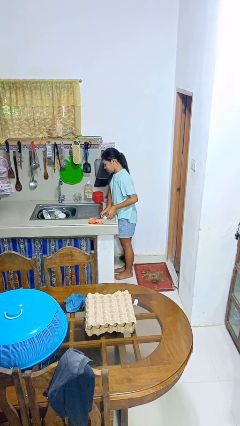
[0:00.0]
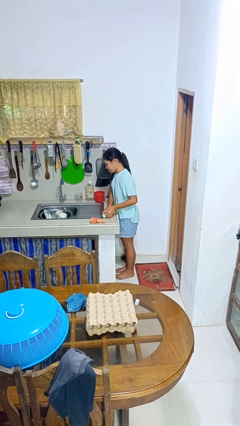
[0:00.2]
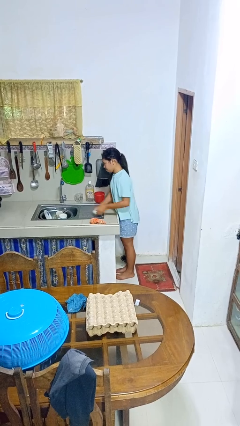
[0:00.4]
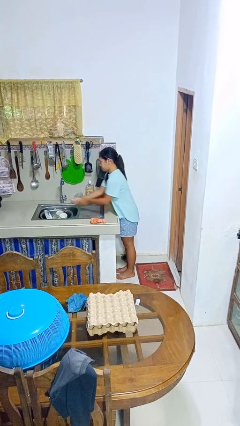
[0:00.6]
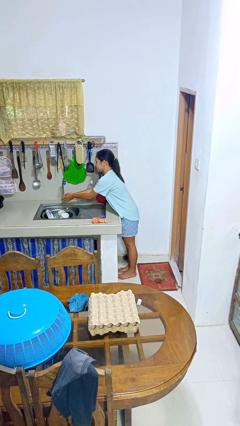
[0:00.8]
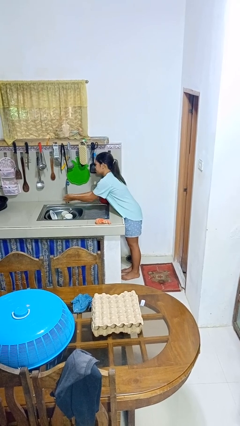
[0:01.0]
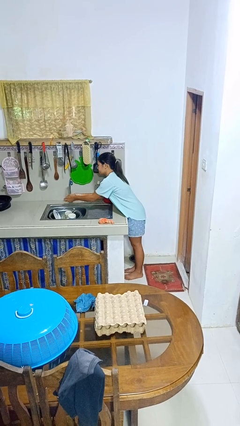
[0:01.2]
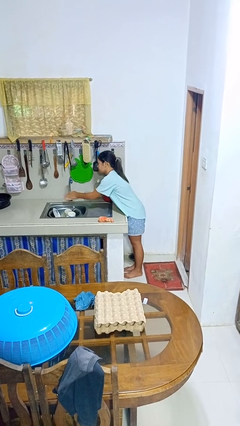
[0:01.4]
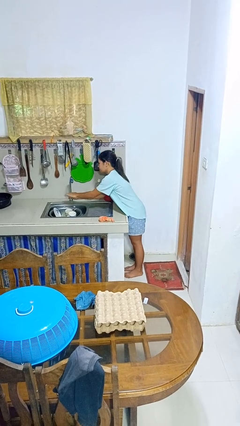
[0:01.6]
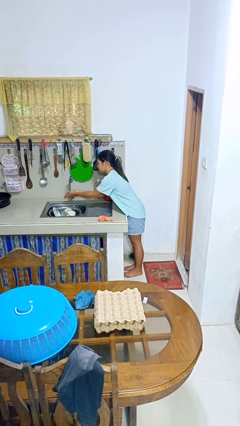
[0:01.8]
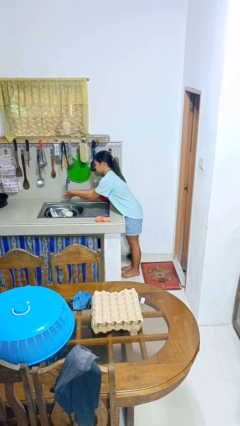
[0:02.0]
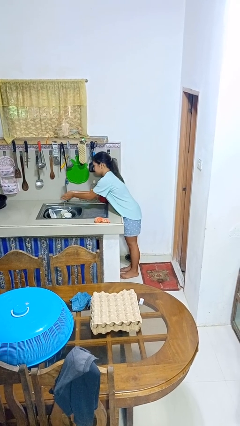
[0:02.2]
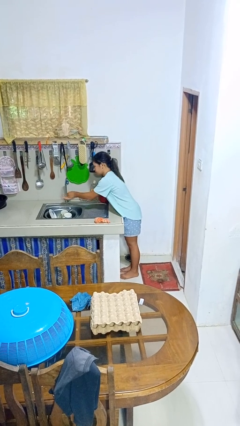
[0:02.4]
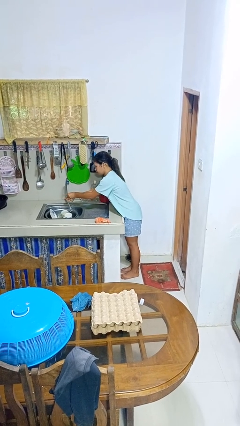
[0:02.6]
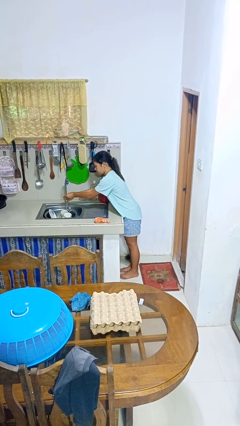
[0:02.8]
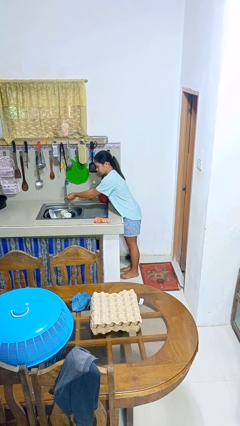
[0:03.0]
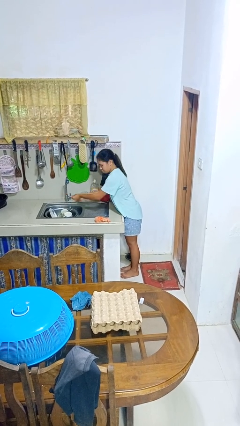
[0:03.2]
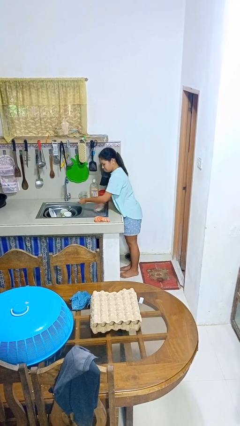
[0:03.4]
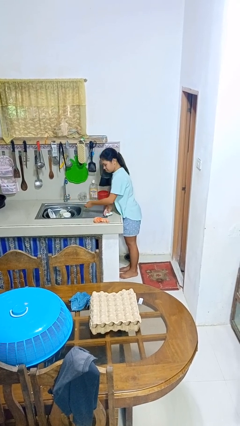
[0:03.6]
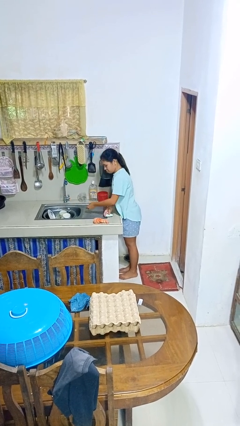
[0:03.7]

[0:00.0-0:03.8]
person washes hands

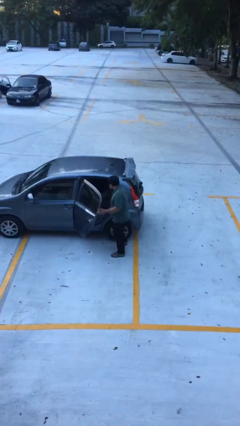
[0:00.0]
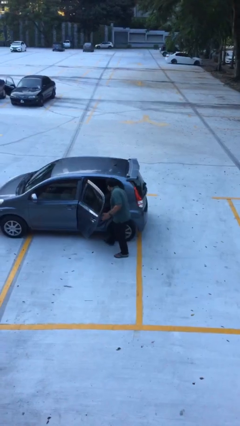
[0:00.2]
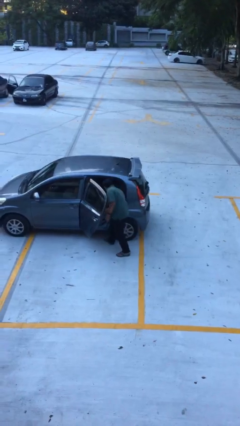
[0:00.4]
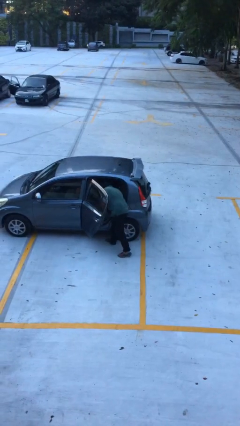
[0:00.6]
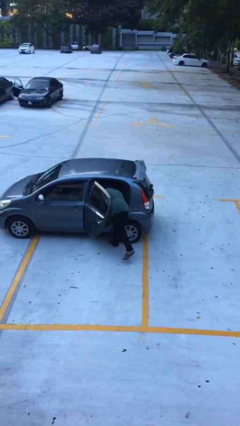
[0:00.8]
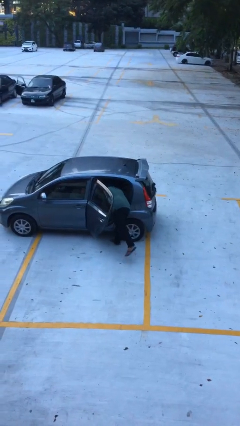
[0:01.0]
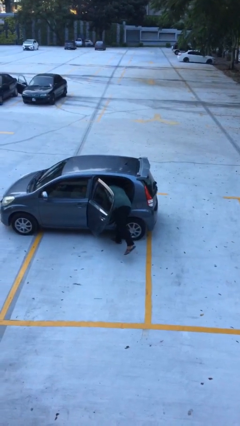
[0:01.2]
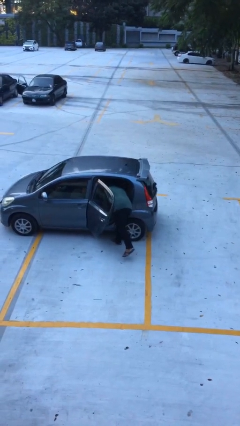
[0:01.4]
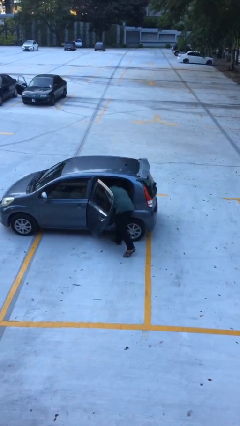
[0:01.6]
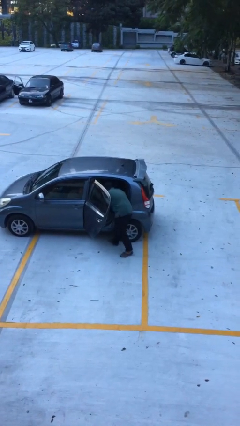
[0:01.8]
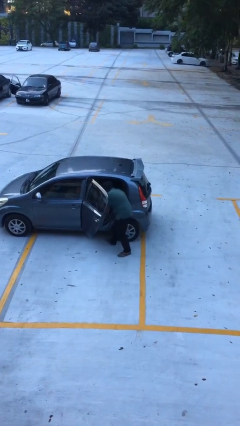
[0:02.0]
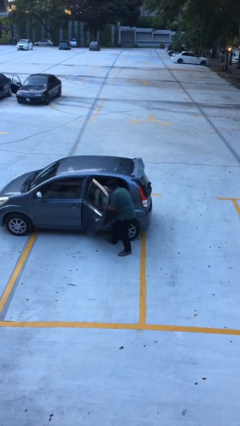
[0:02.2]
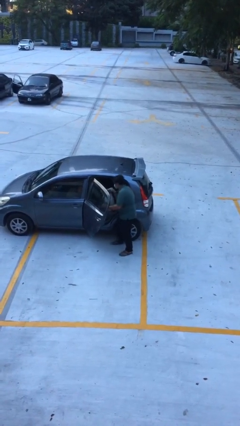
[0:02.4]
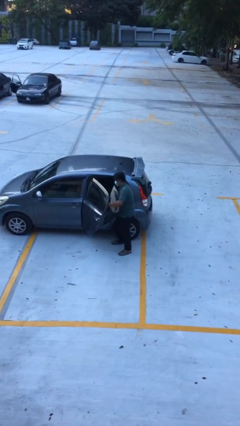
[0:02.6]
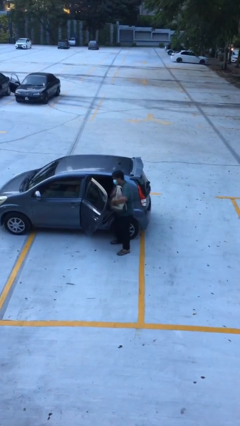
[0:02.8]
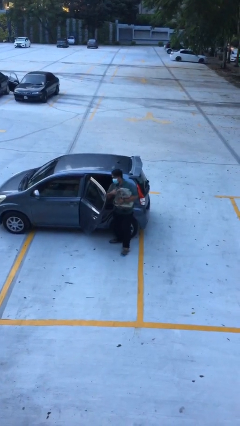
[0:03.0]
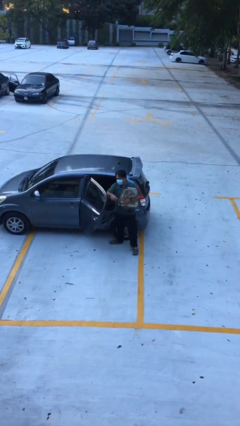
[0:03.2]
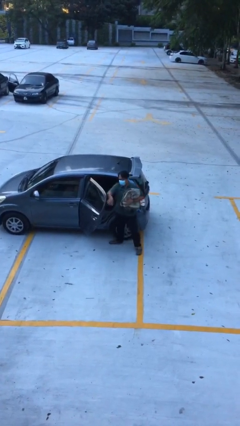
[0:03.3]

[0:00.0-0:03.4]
person unloads car

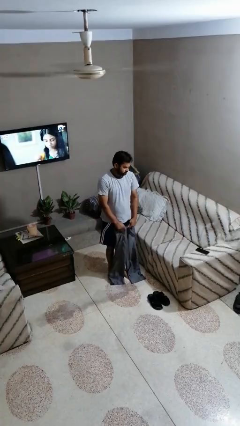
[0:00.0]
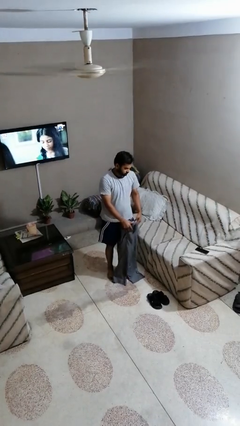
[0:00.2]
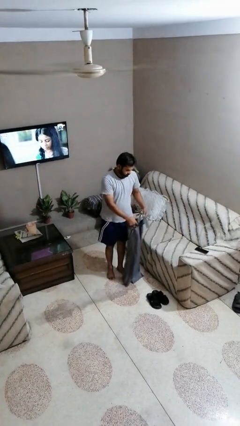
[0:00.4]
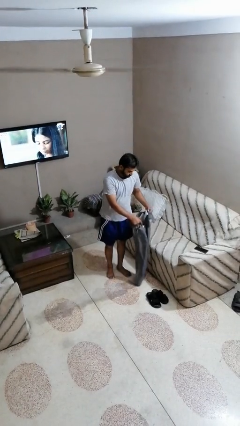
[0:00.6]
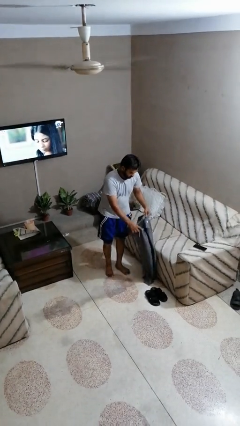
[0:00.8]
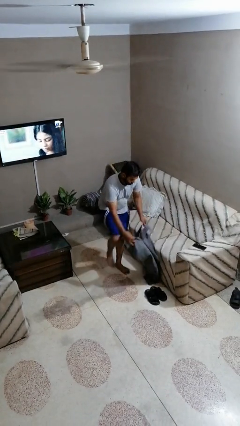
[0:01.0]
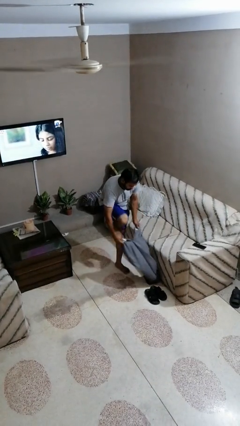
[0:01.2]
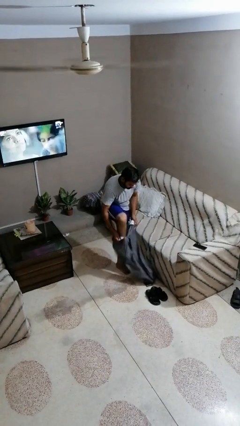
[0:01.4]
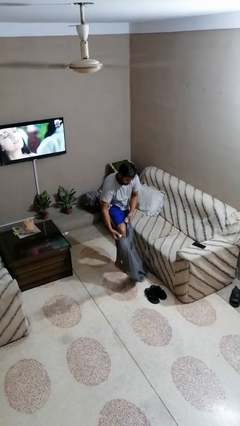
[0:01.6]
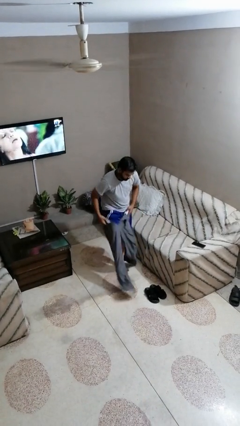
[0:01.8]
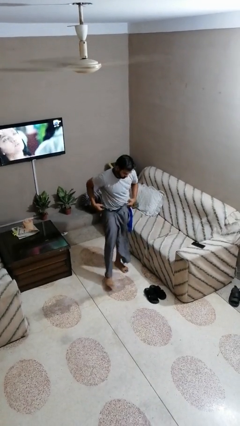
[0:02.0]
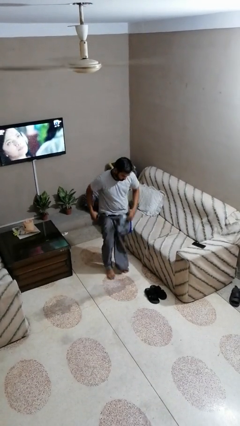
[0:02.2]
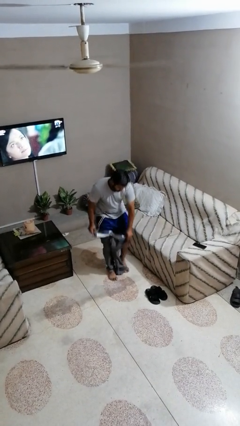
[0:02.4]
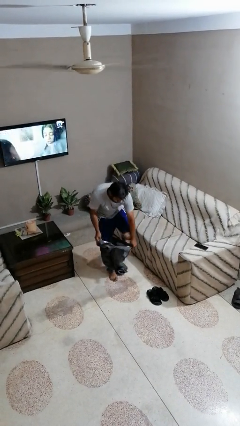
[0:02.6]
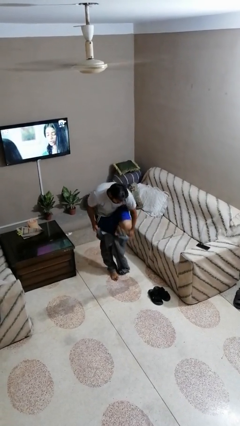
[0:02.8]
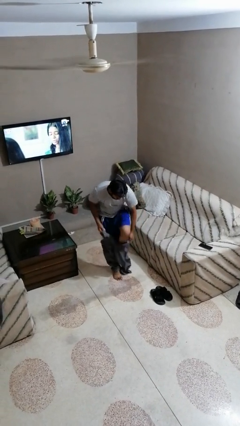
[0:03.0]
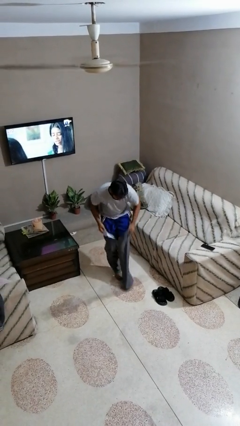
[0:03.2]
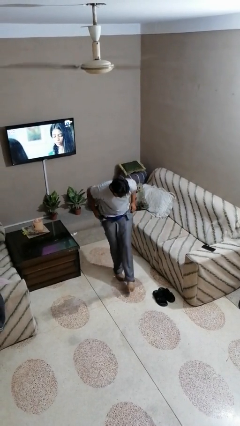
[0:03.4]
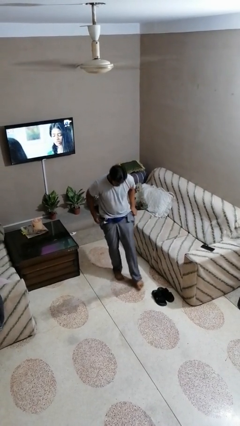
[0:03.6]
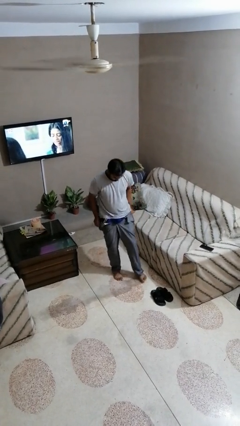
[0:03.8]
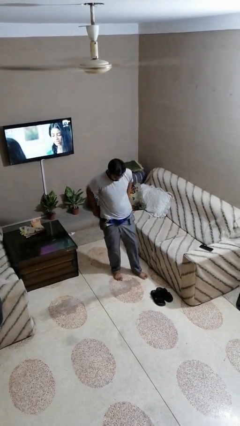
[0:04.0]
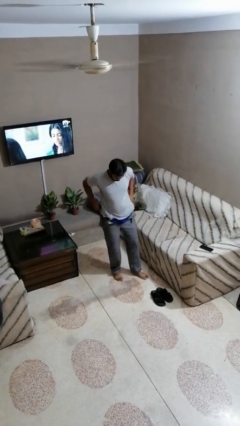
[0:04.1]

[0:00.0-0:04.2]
person puts on pants

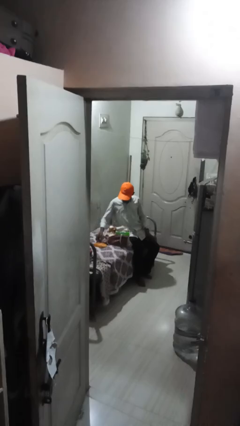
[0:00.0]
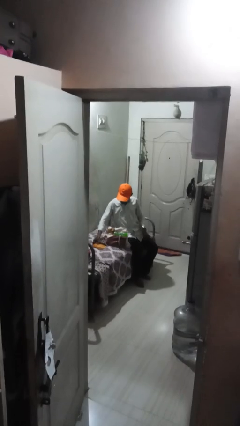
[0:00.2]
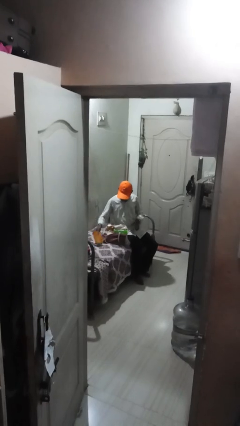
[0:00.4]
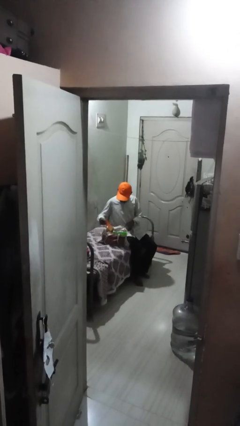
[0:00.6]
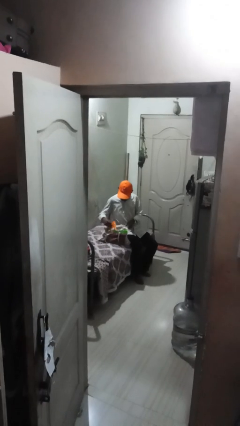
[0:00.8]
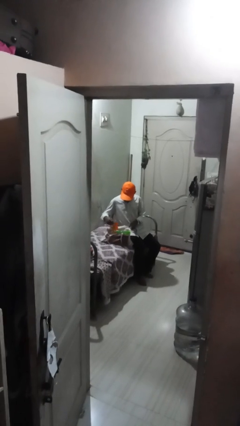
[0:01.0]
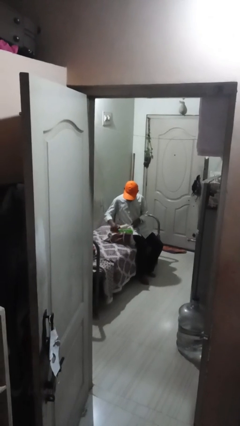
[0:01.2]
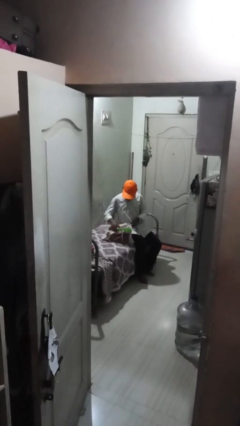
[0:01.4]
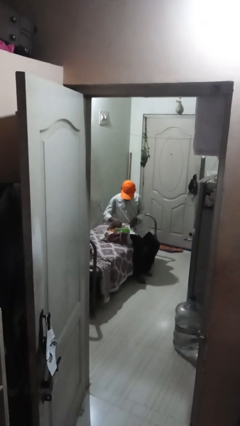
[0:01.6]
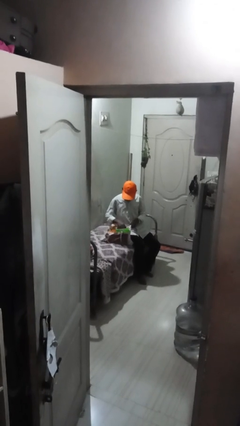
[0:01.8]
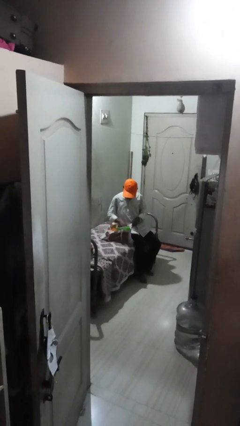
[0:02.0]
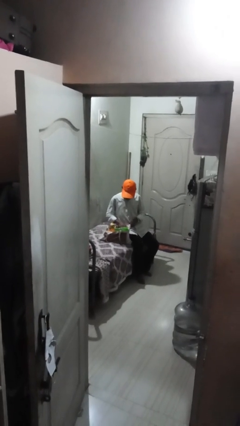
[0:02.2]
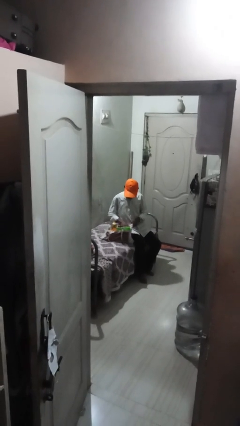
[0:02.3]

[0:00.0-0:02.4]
person puts object into bag

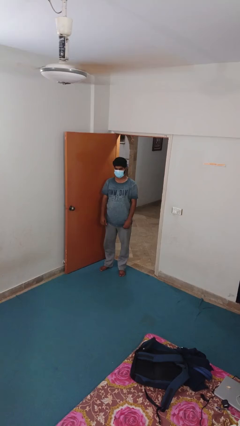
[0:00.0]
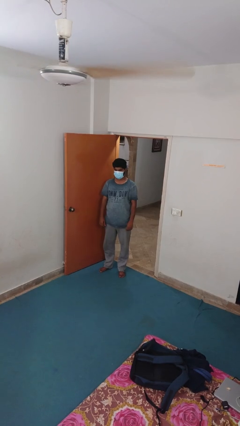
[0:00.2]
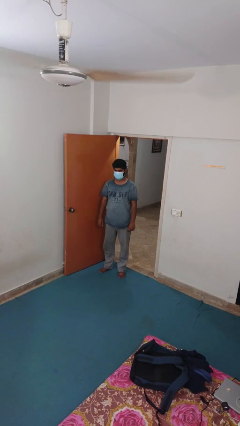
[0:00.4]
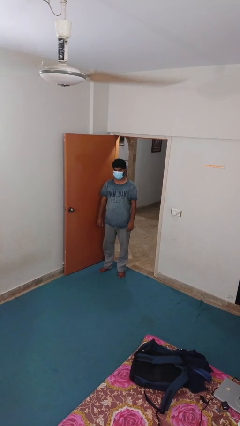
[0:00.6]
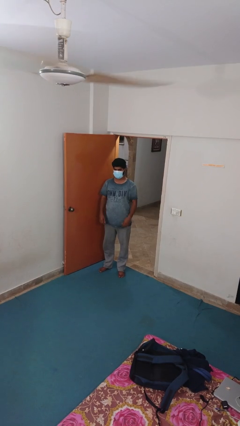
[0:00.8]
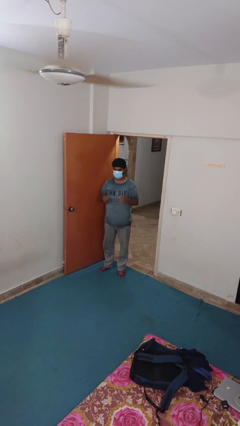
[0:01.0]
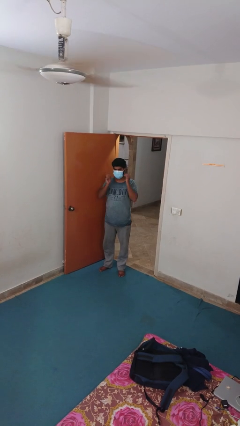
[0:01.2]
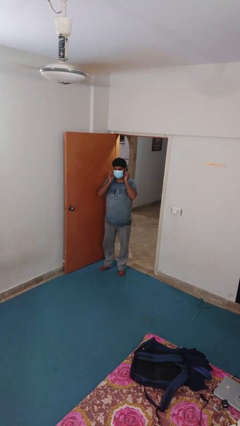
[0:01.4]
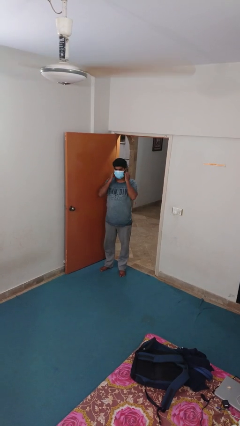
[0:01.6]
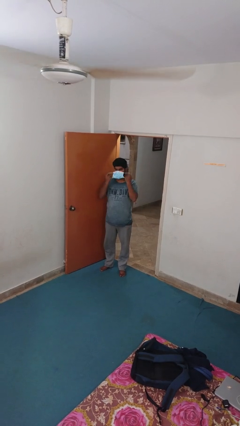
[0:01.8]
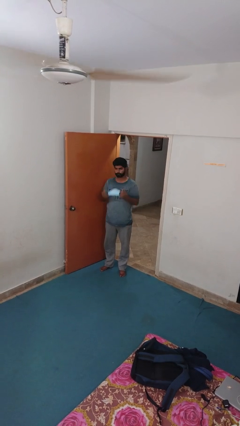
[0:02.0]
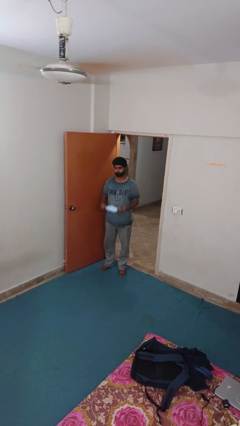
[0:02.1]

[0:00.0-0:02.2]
person takes off facemask

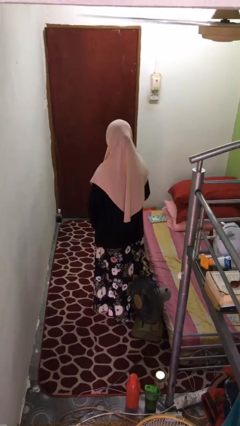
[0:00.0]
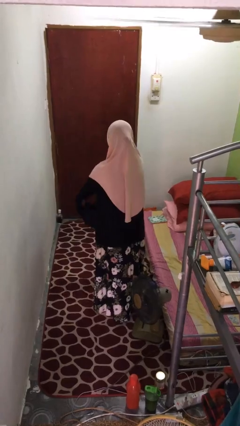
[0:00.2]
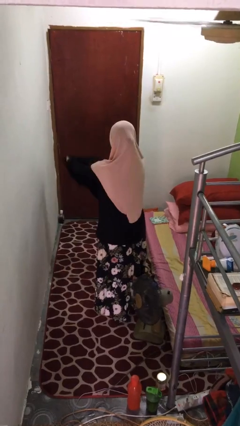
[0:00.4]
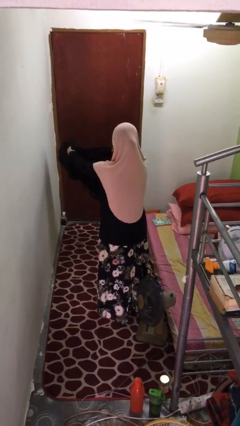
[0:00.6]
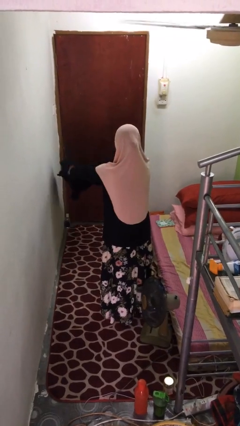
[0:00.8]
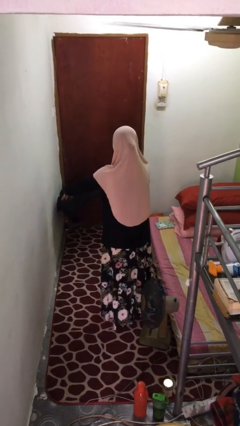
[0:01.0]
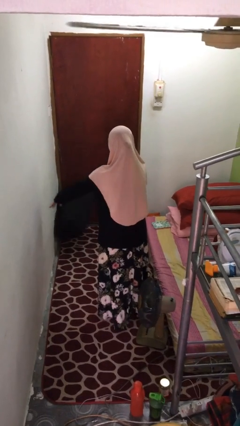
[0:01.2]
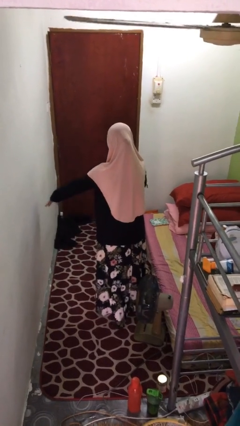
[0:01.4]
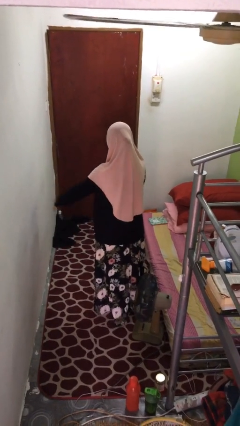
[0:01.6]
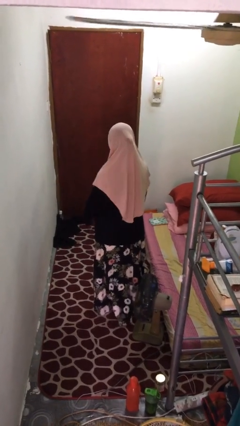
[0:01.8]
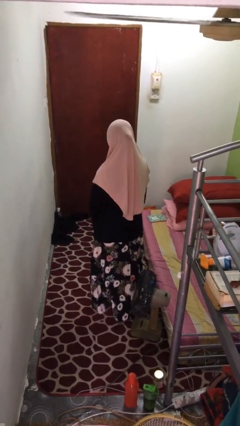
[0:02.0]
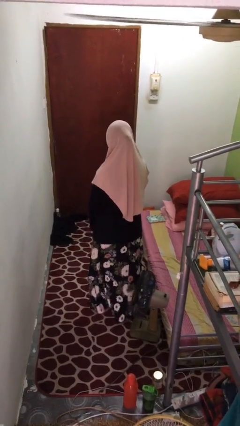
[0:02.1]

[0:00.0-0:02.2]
person throws object to ground
